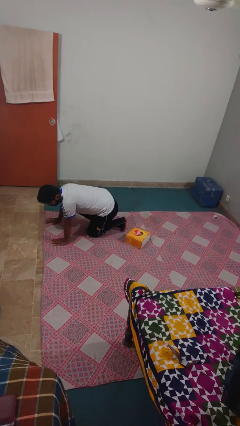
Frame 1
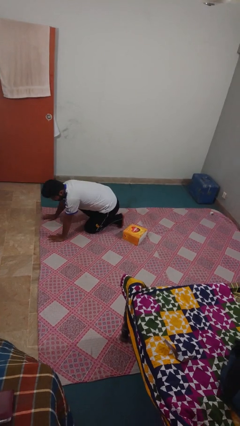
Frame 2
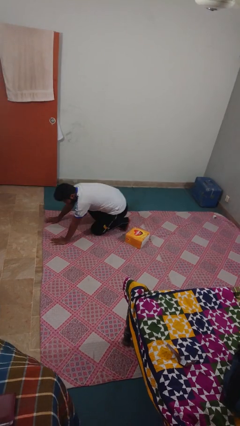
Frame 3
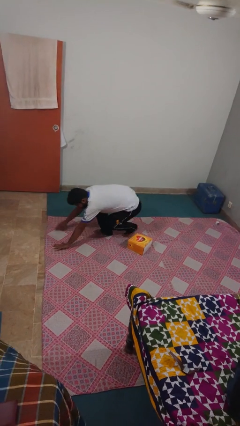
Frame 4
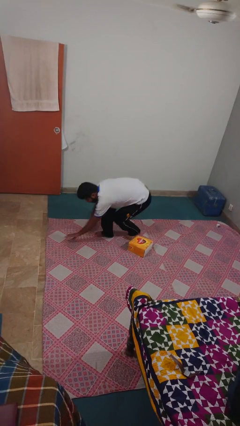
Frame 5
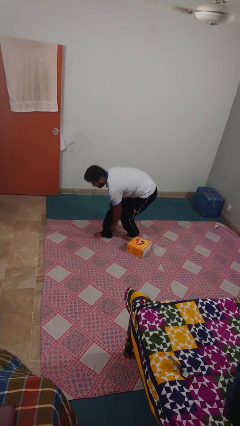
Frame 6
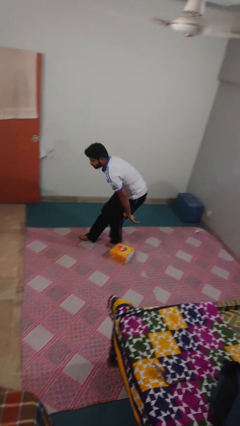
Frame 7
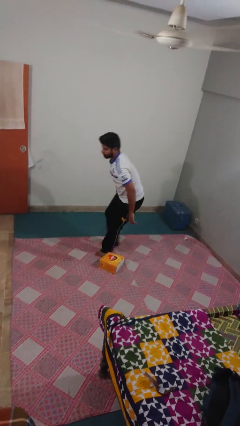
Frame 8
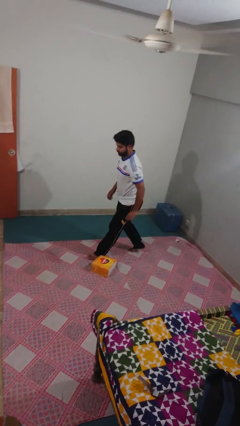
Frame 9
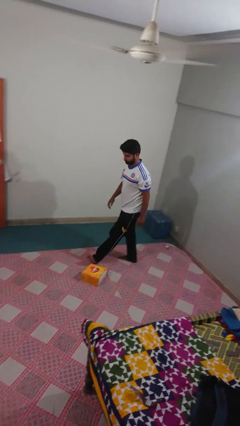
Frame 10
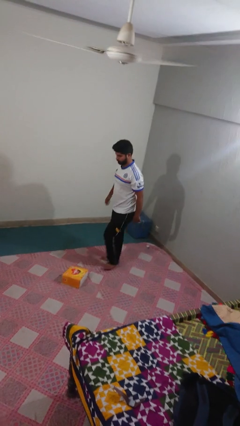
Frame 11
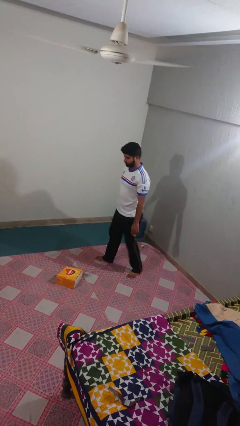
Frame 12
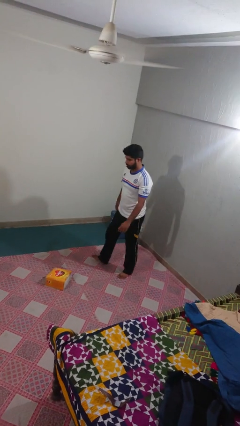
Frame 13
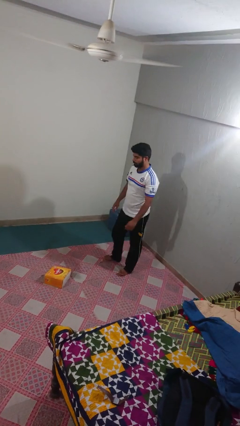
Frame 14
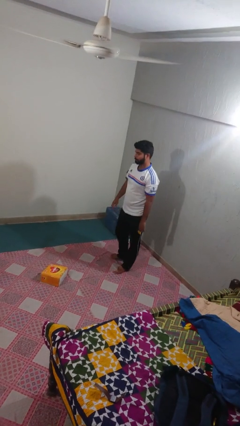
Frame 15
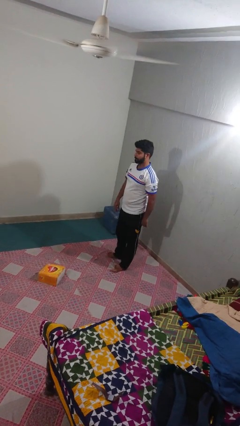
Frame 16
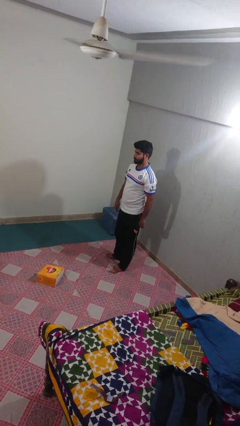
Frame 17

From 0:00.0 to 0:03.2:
person stands up from floor

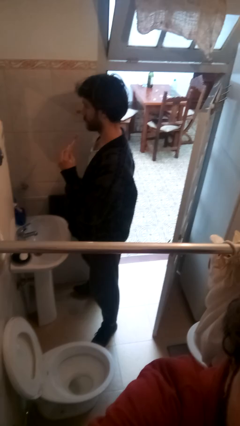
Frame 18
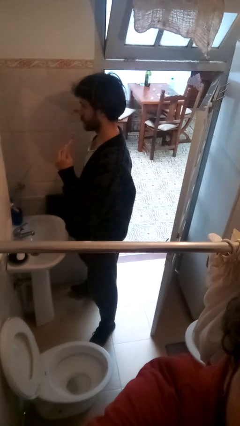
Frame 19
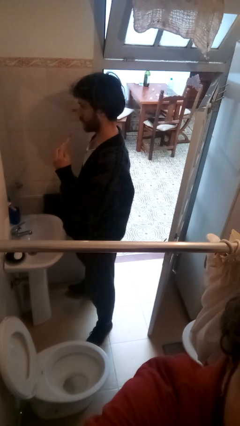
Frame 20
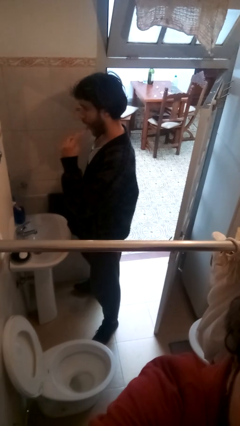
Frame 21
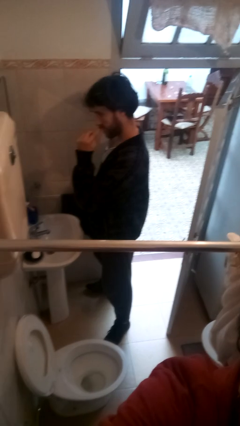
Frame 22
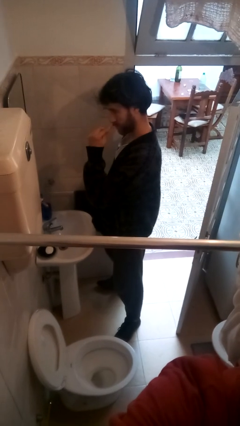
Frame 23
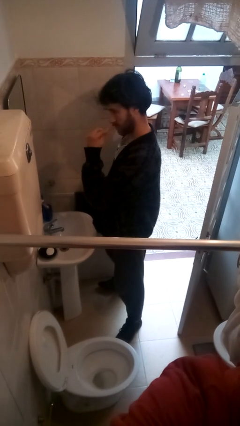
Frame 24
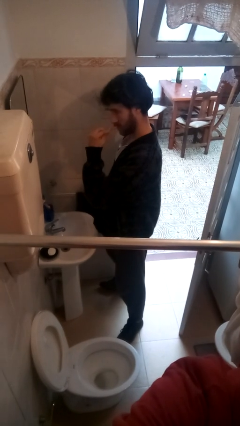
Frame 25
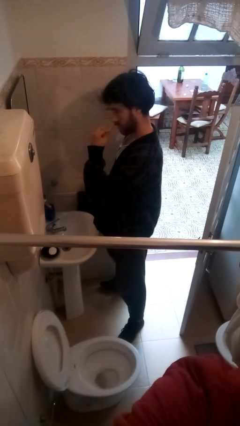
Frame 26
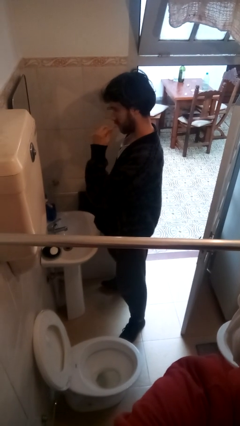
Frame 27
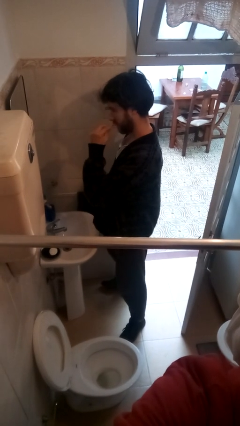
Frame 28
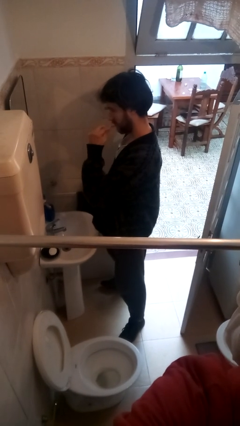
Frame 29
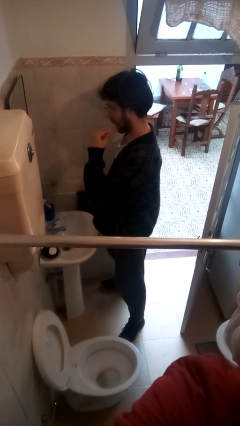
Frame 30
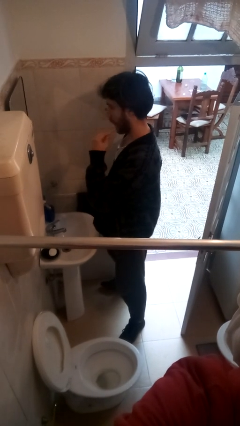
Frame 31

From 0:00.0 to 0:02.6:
person brushes teeth

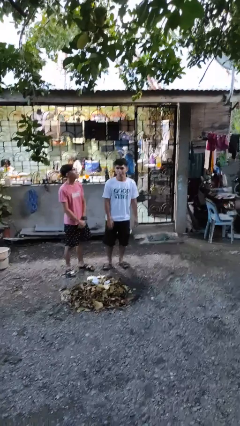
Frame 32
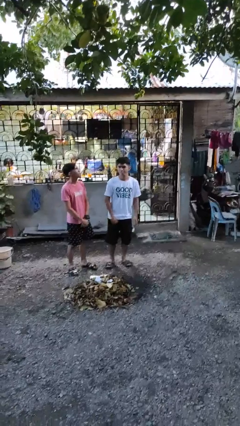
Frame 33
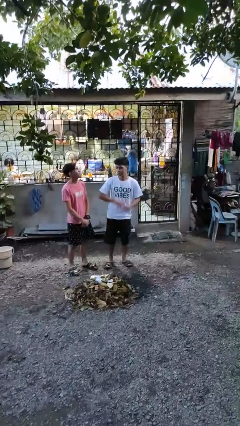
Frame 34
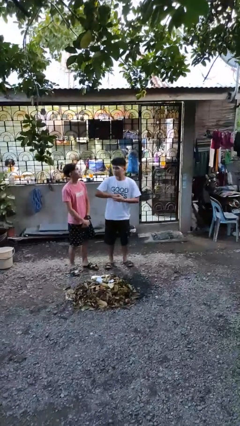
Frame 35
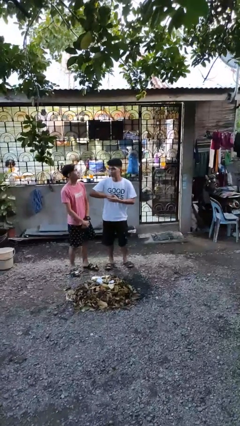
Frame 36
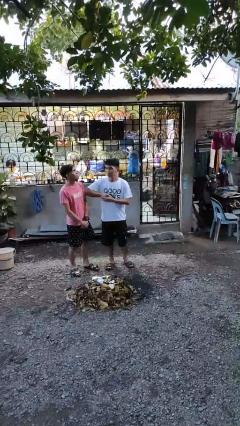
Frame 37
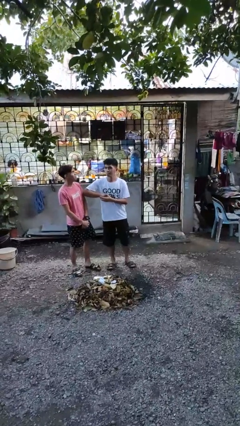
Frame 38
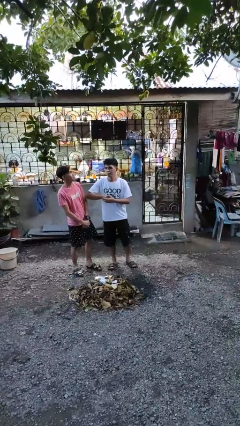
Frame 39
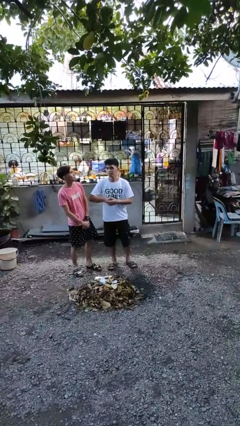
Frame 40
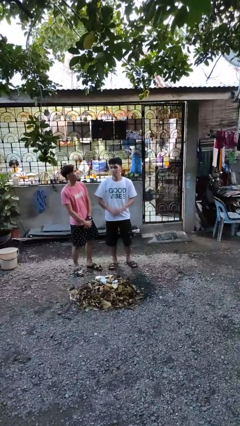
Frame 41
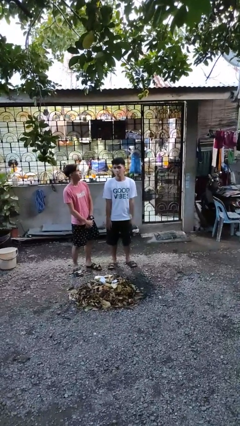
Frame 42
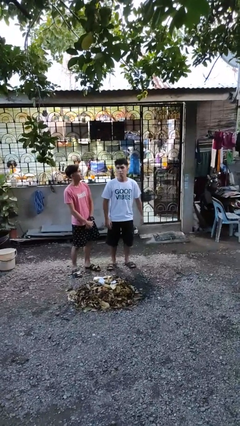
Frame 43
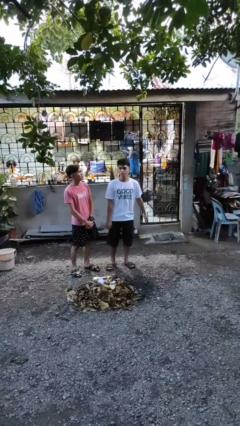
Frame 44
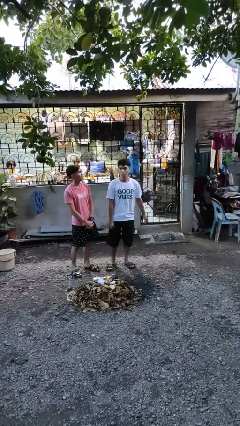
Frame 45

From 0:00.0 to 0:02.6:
person nudges person with elbow

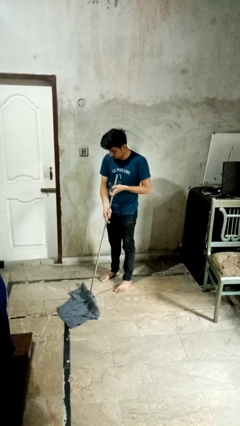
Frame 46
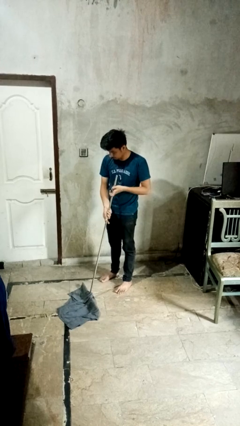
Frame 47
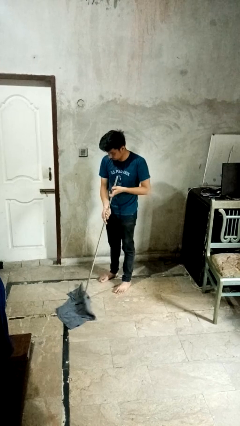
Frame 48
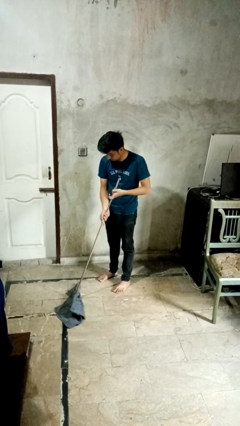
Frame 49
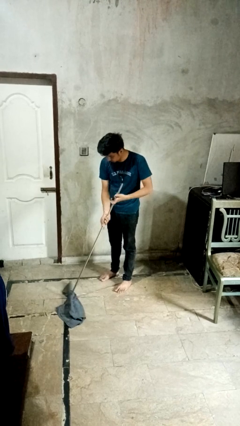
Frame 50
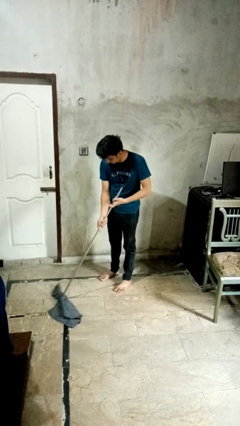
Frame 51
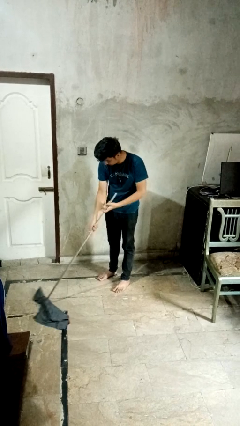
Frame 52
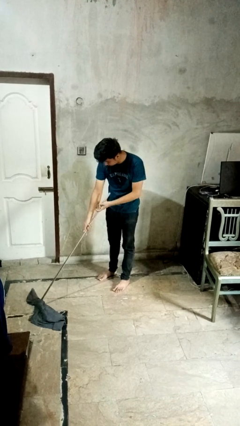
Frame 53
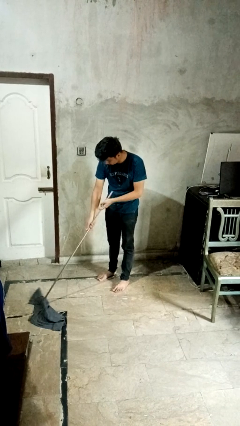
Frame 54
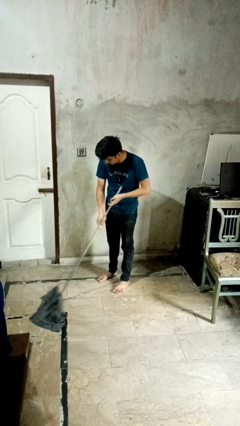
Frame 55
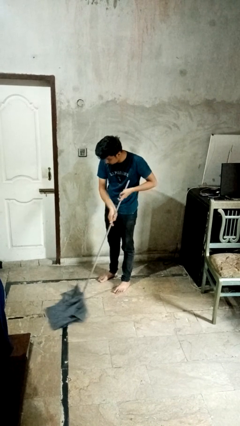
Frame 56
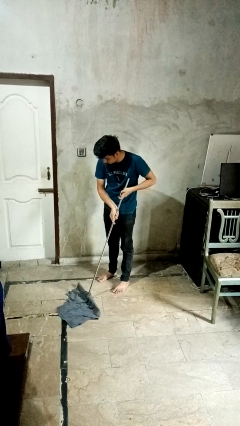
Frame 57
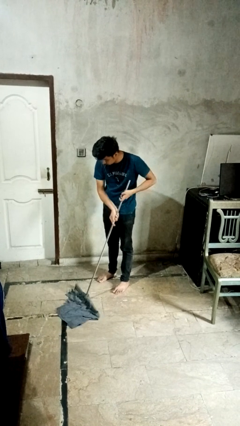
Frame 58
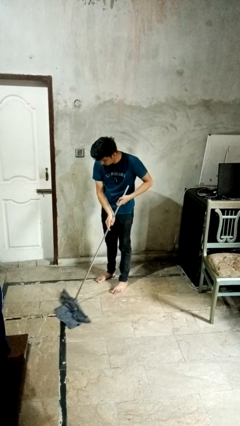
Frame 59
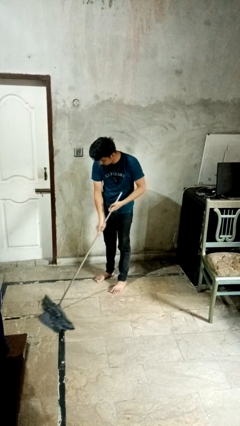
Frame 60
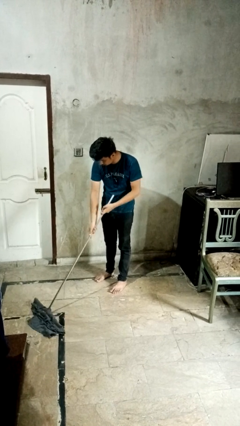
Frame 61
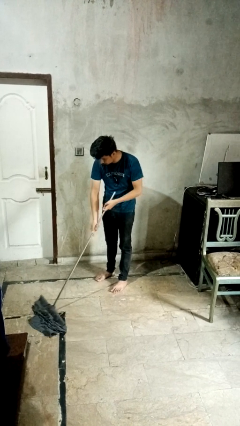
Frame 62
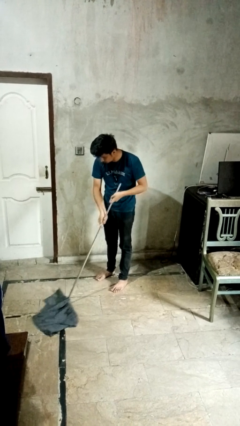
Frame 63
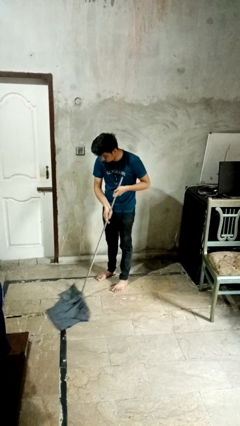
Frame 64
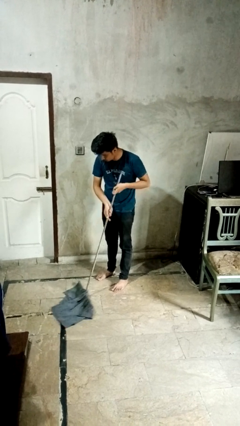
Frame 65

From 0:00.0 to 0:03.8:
person mops

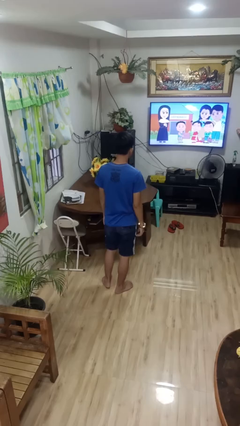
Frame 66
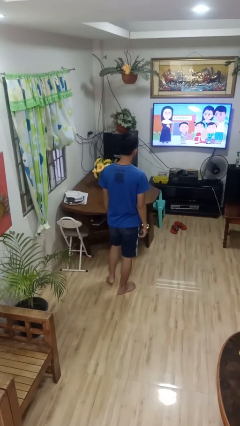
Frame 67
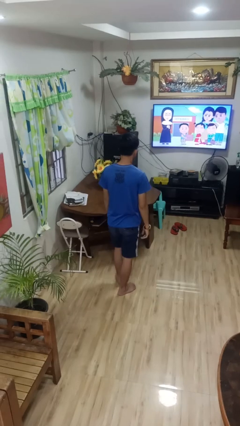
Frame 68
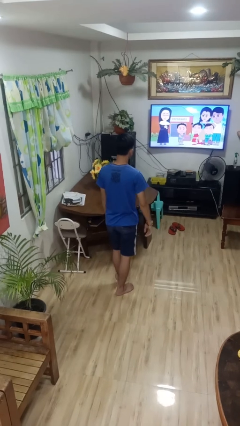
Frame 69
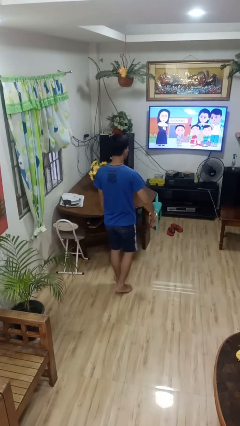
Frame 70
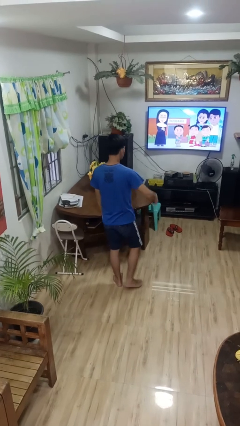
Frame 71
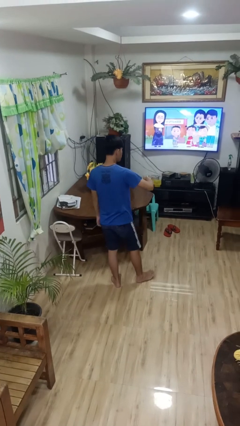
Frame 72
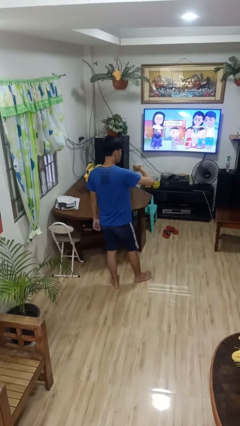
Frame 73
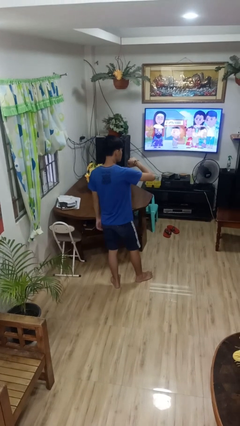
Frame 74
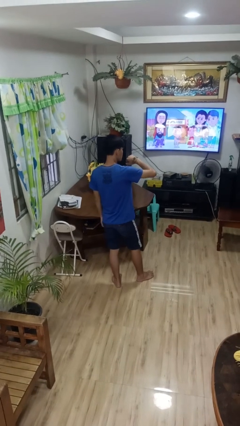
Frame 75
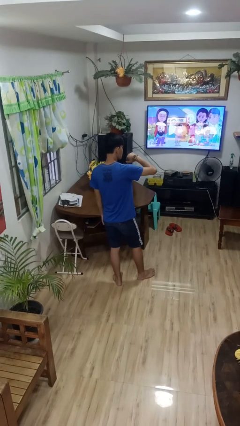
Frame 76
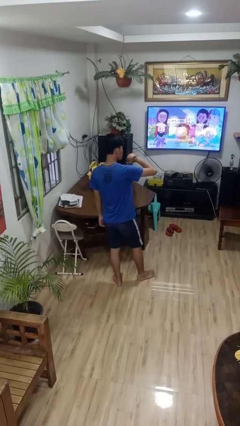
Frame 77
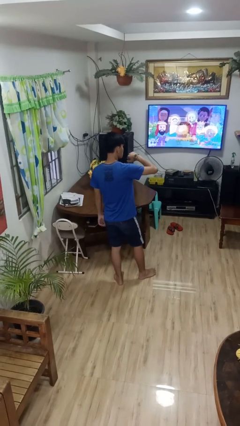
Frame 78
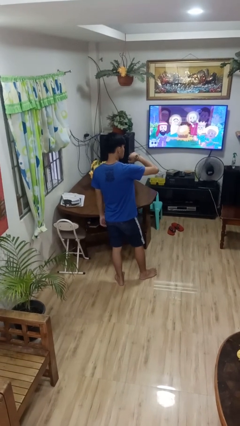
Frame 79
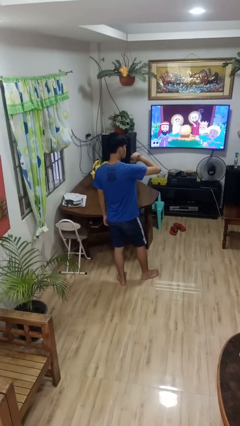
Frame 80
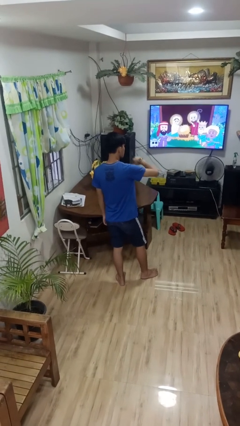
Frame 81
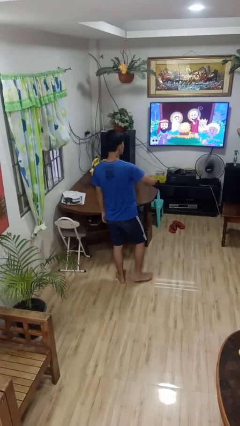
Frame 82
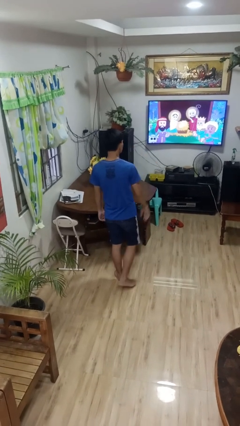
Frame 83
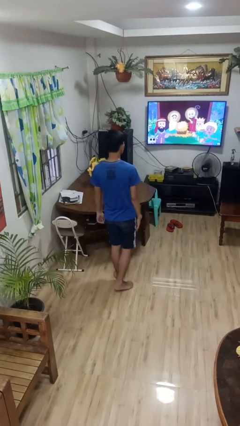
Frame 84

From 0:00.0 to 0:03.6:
person looks at wristwatch

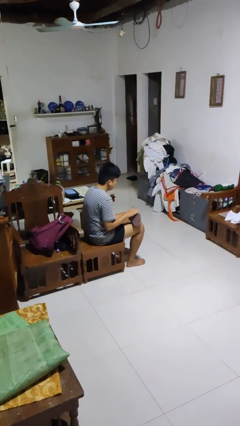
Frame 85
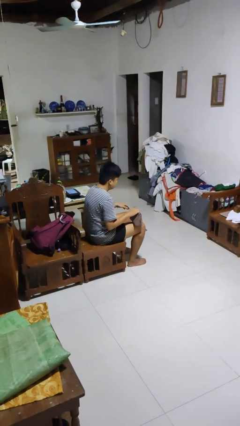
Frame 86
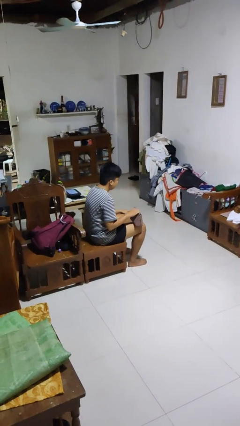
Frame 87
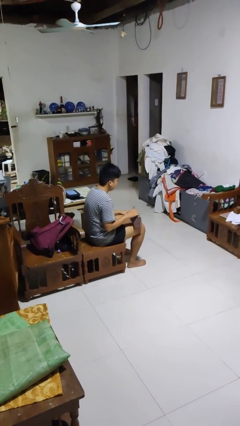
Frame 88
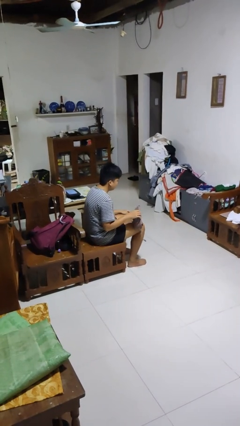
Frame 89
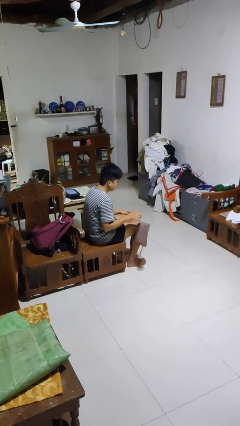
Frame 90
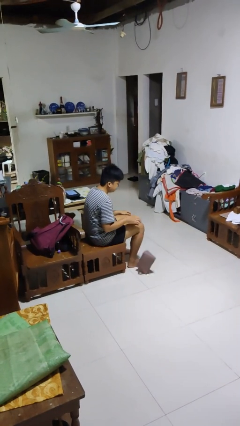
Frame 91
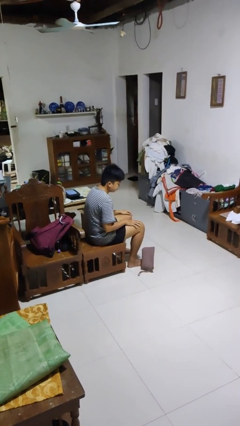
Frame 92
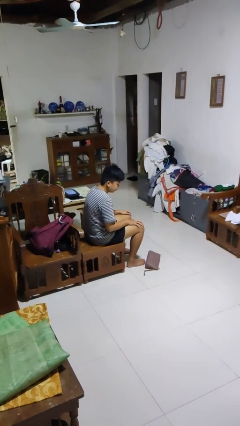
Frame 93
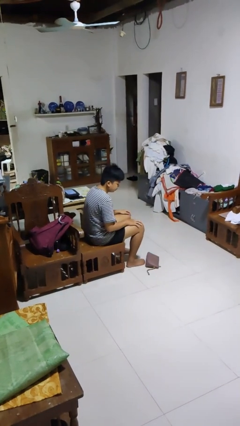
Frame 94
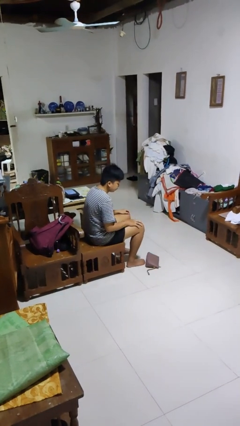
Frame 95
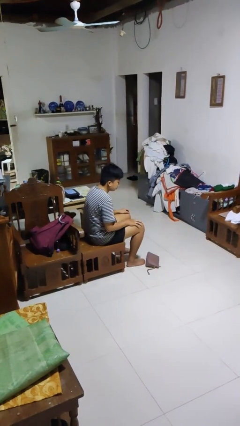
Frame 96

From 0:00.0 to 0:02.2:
person drops object
